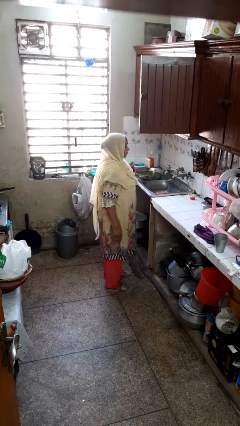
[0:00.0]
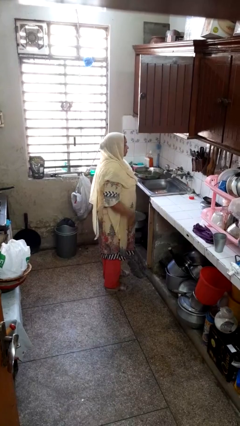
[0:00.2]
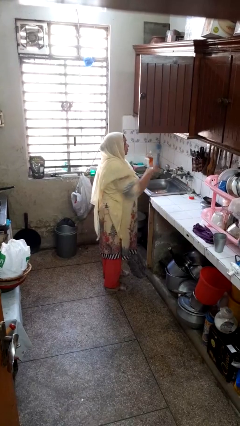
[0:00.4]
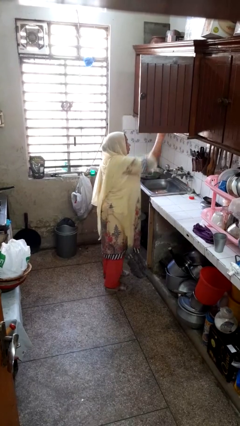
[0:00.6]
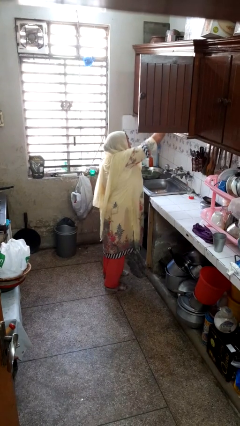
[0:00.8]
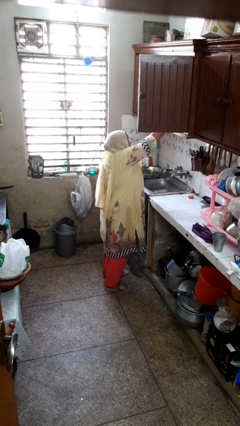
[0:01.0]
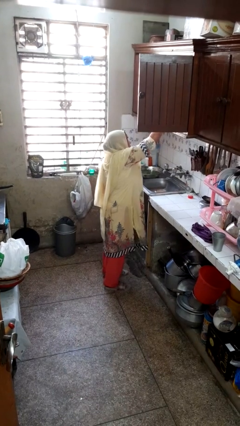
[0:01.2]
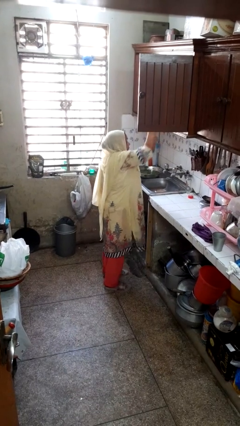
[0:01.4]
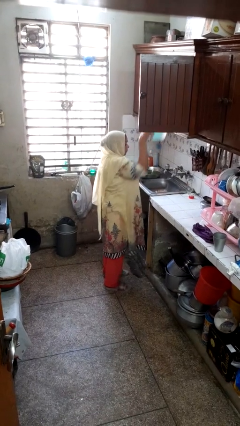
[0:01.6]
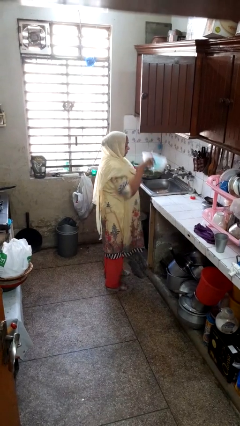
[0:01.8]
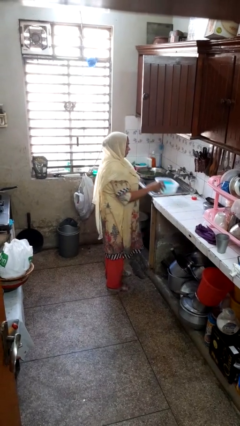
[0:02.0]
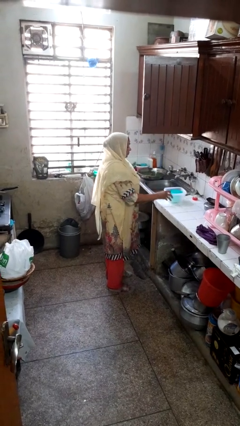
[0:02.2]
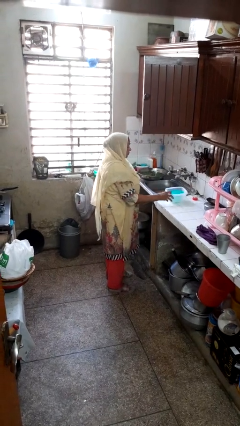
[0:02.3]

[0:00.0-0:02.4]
person takes object from cabinet

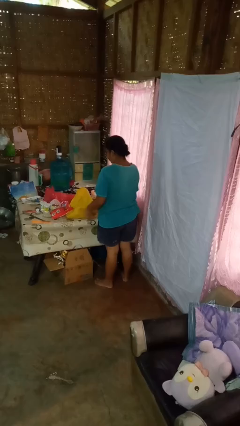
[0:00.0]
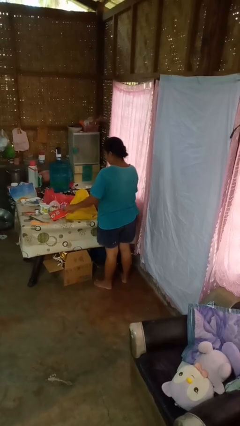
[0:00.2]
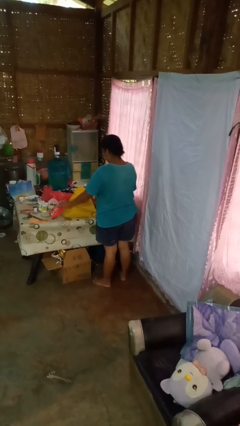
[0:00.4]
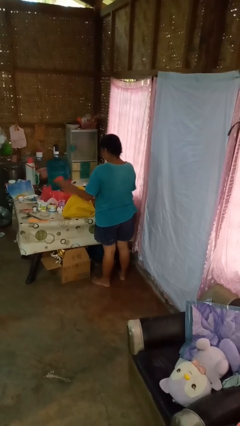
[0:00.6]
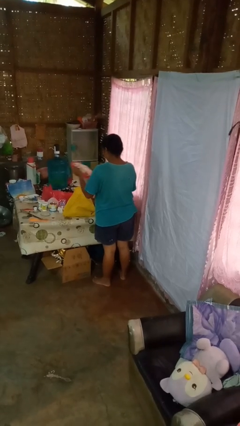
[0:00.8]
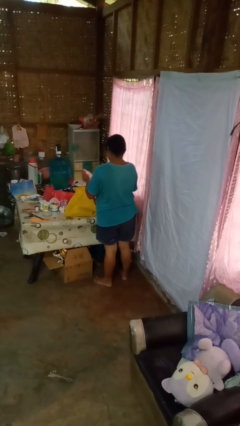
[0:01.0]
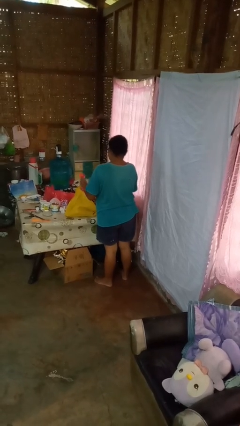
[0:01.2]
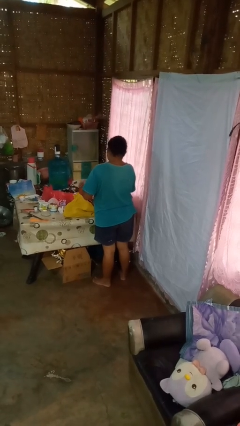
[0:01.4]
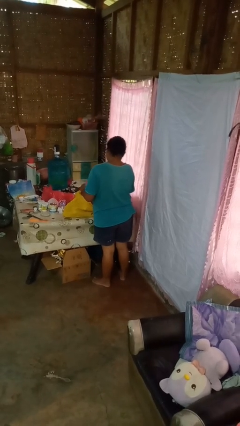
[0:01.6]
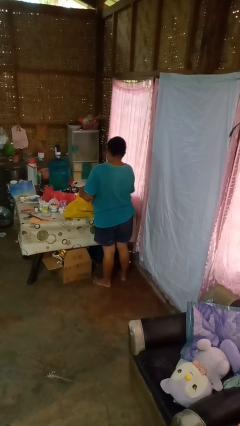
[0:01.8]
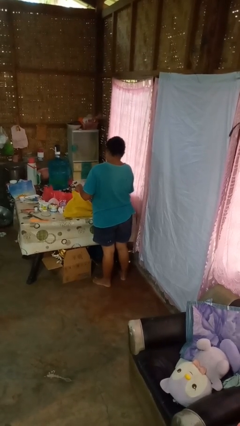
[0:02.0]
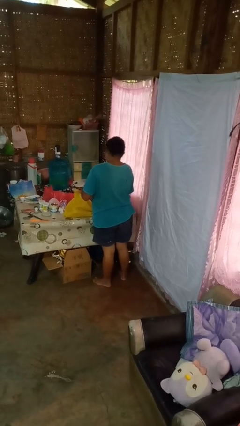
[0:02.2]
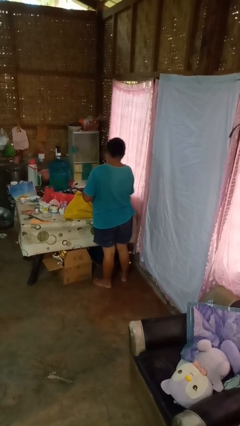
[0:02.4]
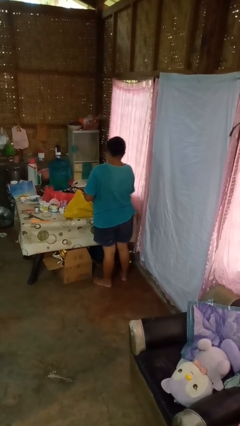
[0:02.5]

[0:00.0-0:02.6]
person puts object into bag

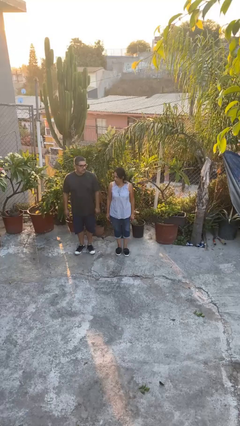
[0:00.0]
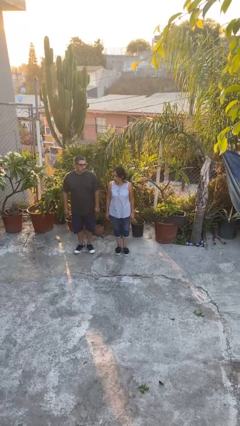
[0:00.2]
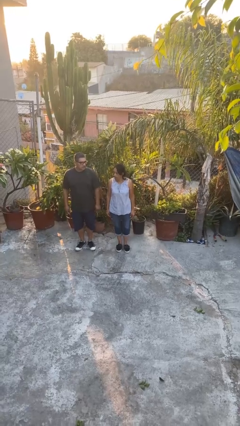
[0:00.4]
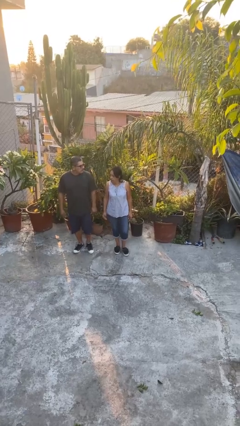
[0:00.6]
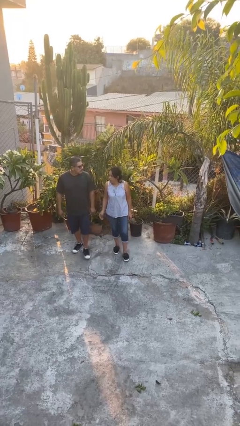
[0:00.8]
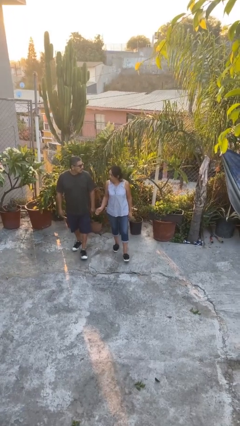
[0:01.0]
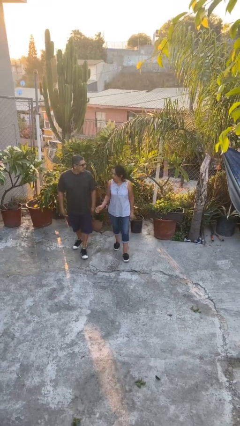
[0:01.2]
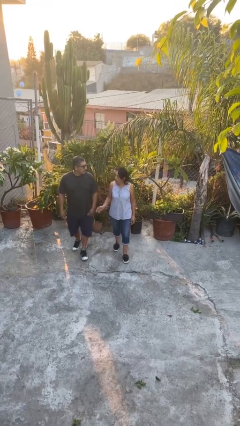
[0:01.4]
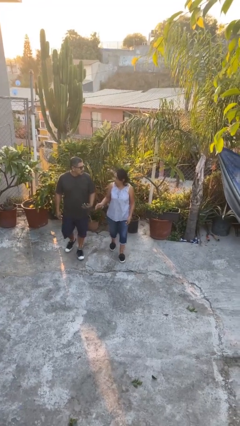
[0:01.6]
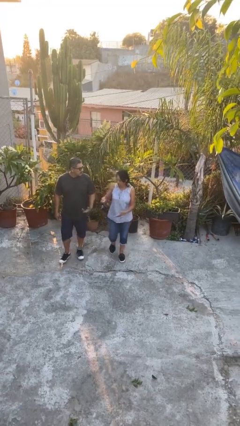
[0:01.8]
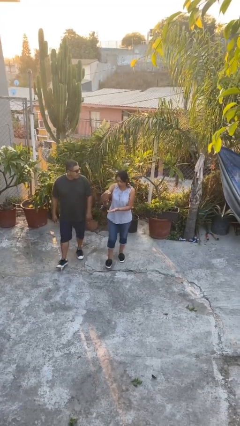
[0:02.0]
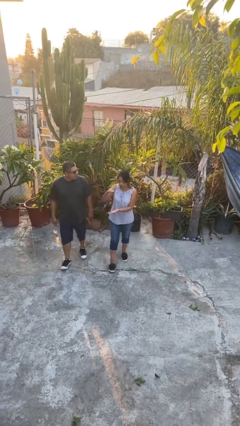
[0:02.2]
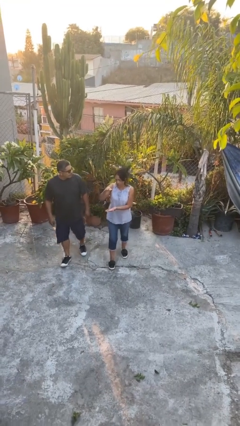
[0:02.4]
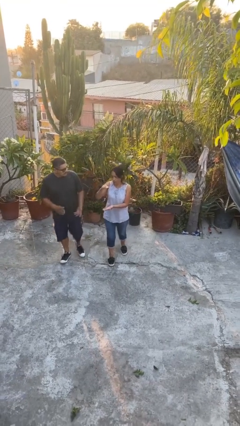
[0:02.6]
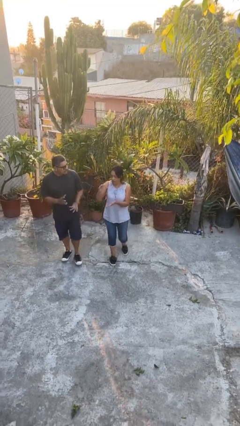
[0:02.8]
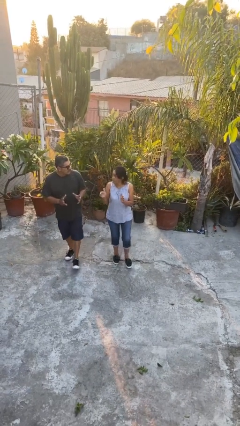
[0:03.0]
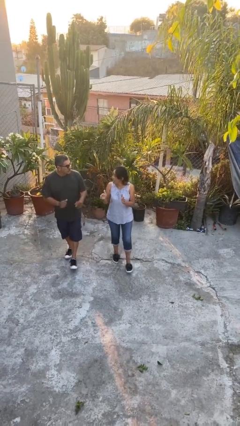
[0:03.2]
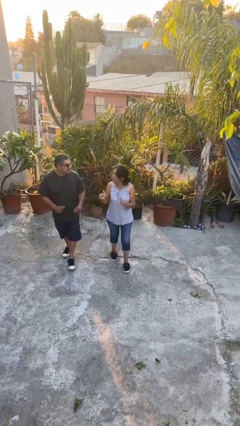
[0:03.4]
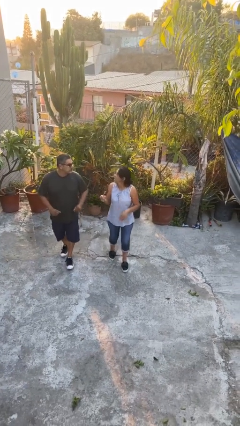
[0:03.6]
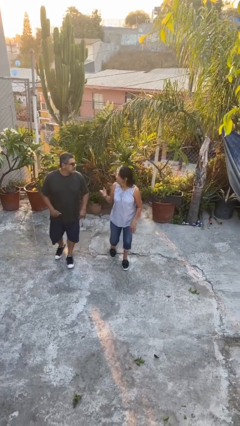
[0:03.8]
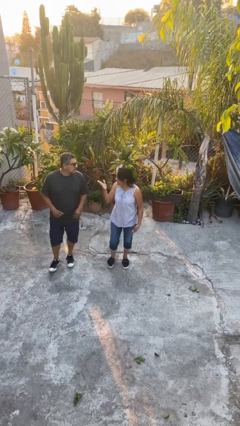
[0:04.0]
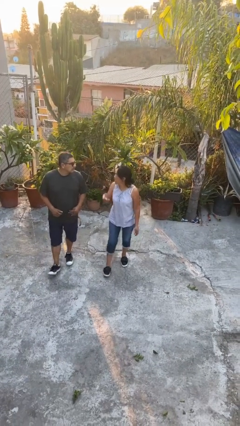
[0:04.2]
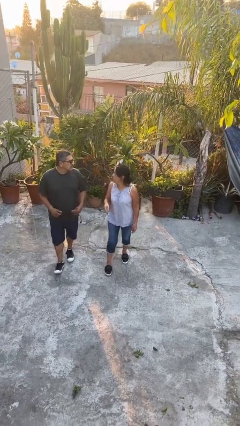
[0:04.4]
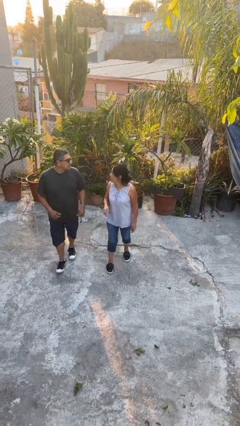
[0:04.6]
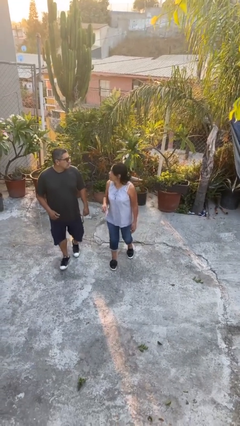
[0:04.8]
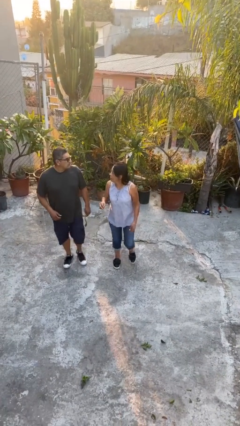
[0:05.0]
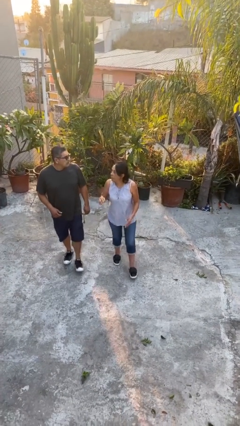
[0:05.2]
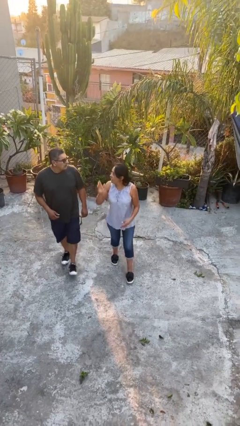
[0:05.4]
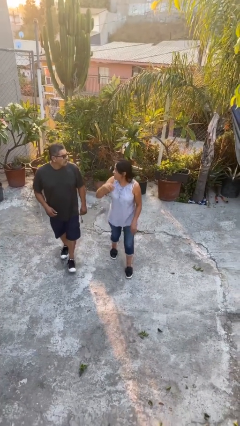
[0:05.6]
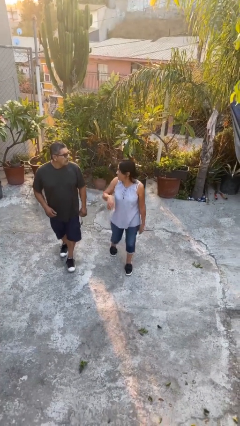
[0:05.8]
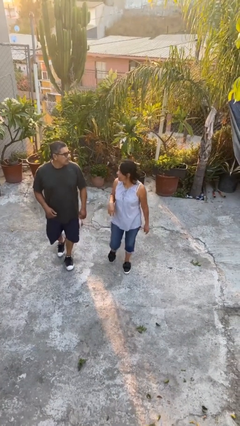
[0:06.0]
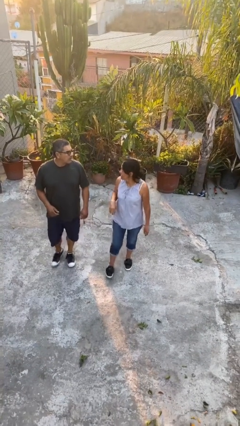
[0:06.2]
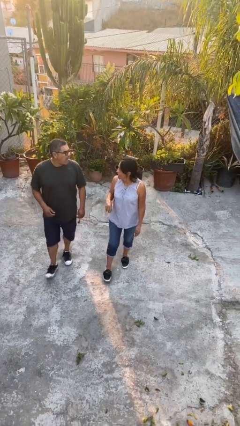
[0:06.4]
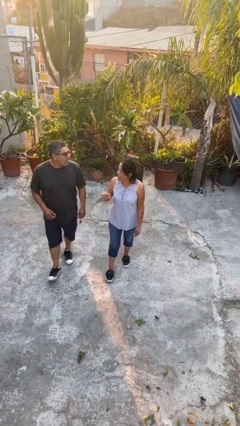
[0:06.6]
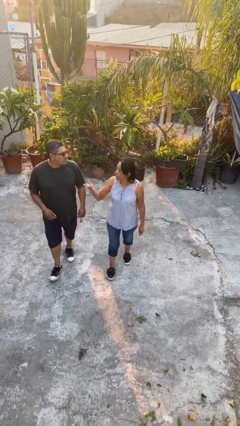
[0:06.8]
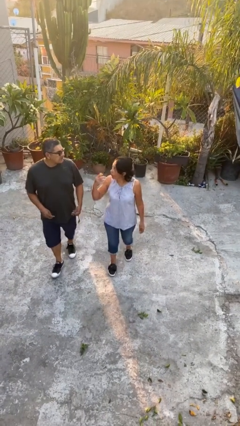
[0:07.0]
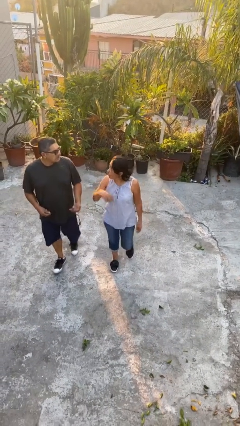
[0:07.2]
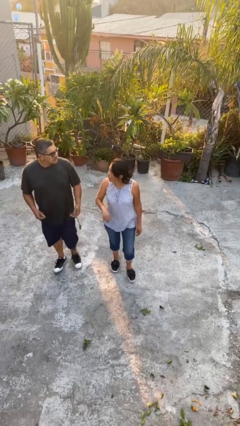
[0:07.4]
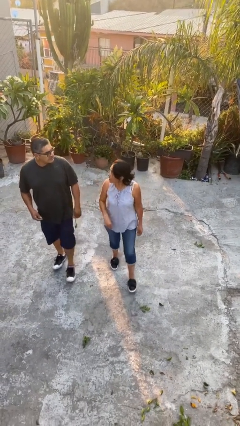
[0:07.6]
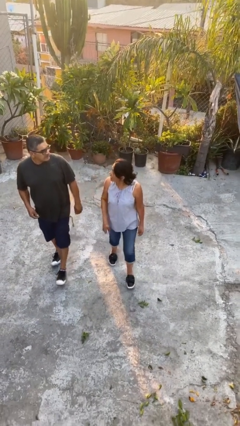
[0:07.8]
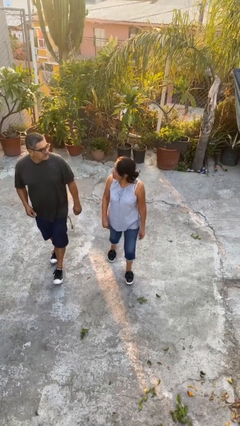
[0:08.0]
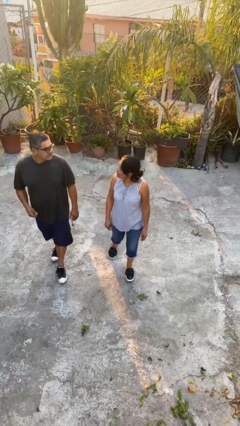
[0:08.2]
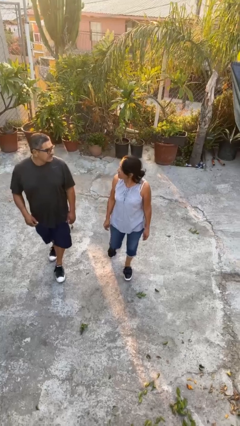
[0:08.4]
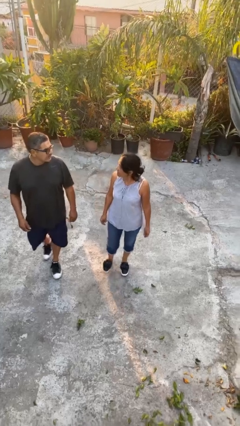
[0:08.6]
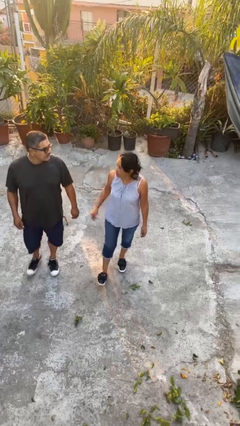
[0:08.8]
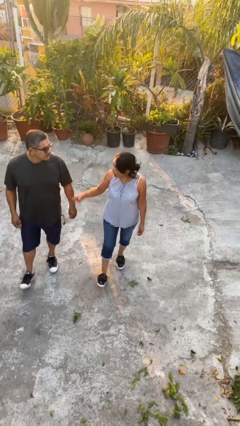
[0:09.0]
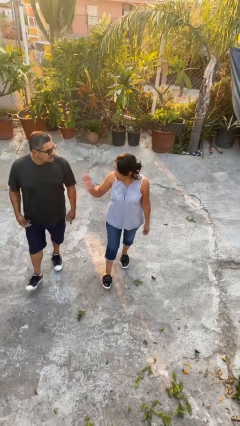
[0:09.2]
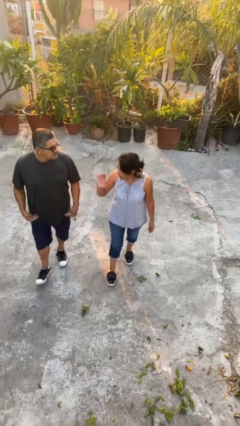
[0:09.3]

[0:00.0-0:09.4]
person talks to person

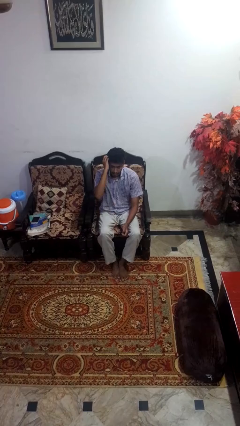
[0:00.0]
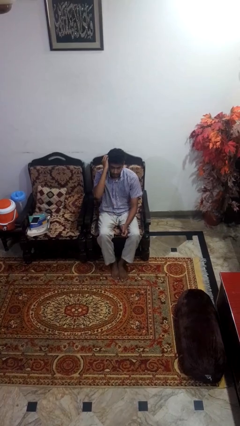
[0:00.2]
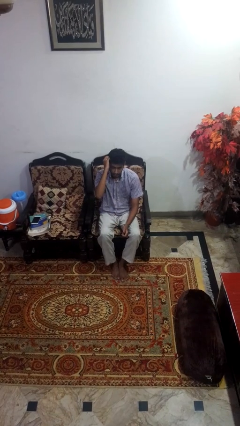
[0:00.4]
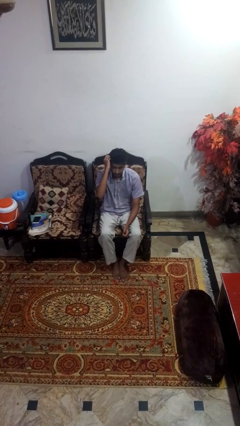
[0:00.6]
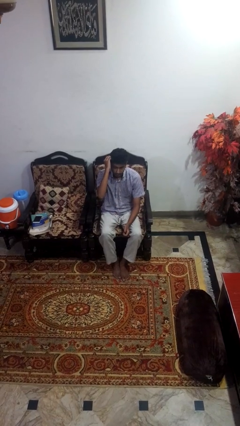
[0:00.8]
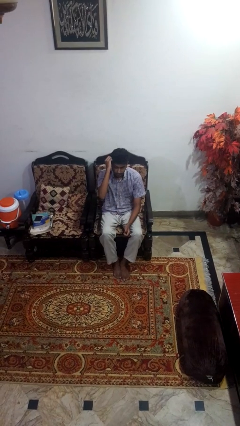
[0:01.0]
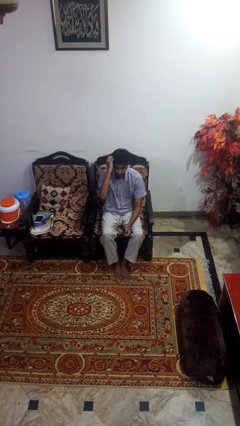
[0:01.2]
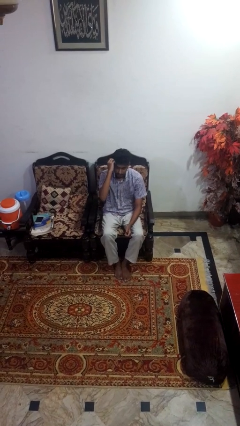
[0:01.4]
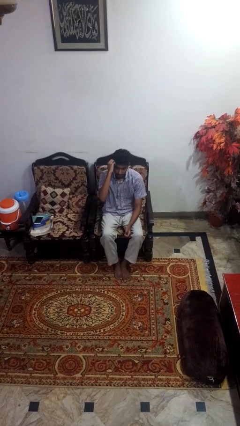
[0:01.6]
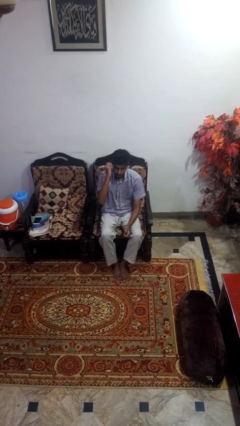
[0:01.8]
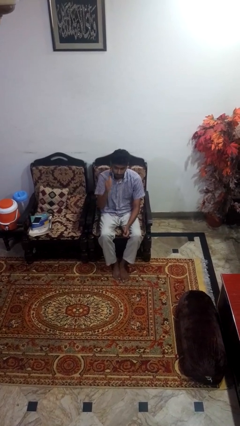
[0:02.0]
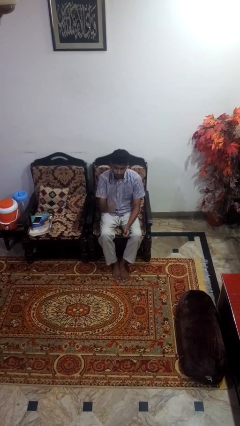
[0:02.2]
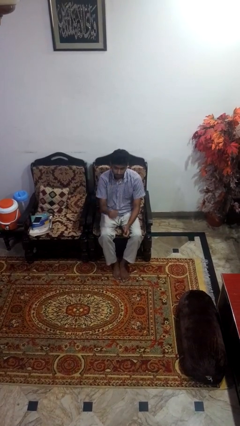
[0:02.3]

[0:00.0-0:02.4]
person scratches face

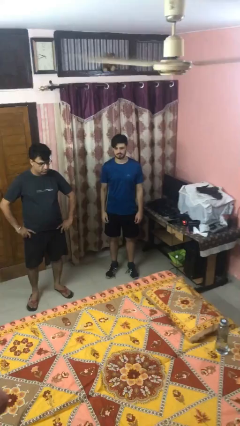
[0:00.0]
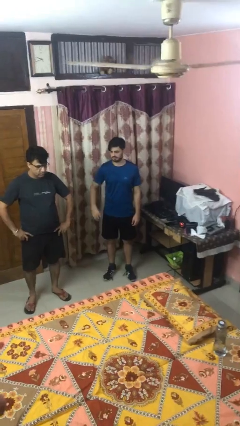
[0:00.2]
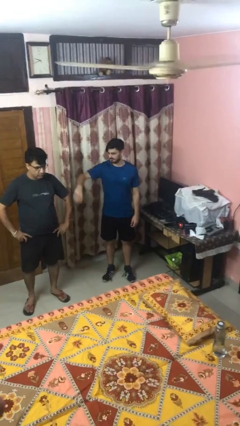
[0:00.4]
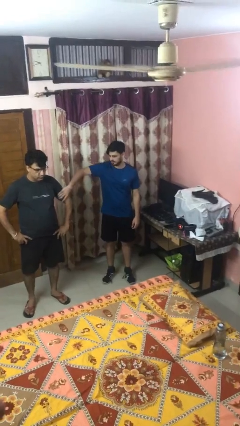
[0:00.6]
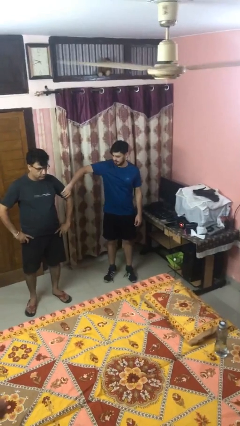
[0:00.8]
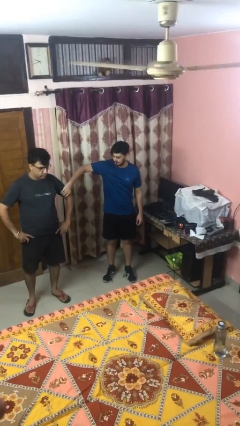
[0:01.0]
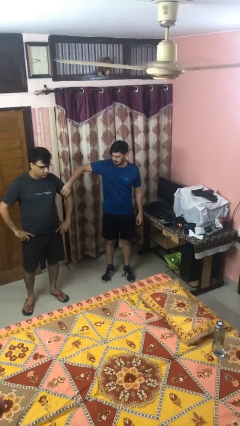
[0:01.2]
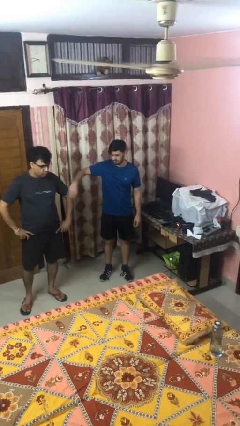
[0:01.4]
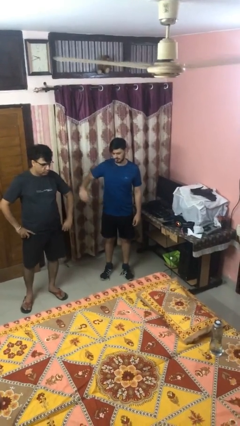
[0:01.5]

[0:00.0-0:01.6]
person grabs person by bicep
